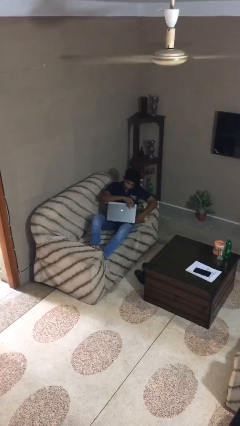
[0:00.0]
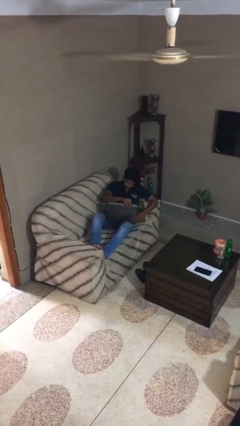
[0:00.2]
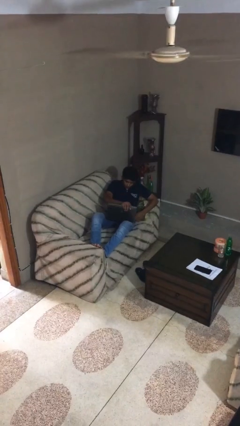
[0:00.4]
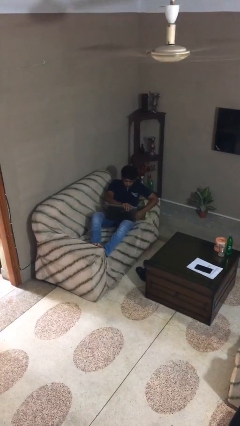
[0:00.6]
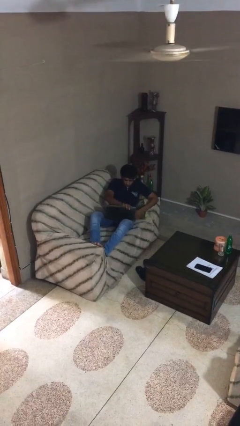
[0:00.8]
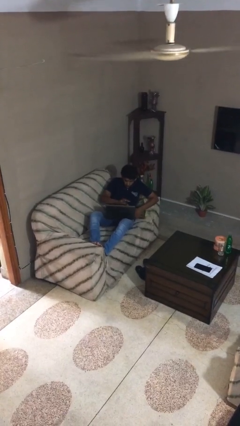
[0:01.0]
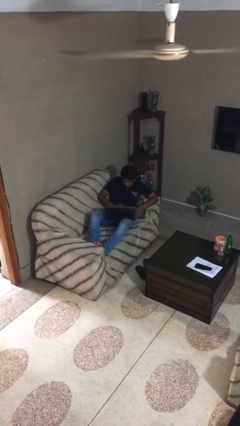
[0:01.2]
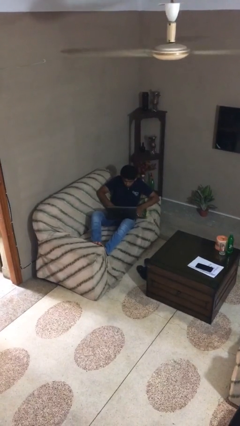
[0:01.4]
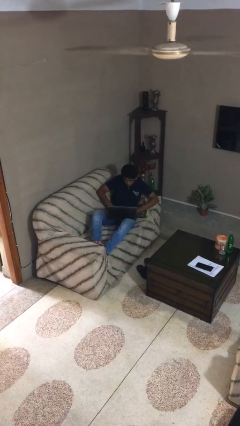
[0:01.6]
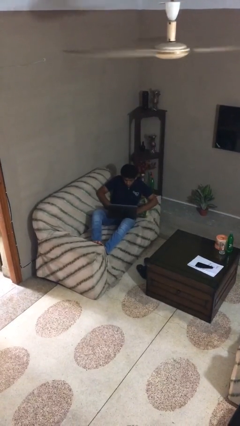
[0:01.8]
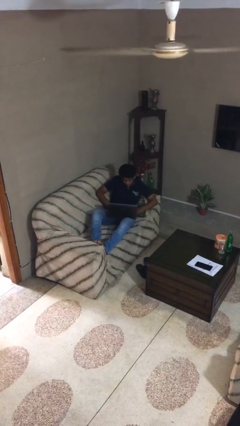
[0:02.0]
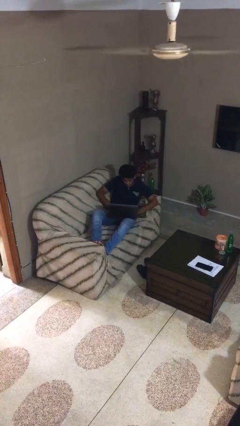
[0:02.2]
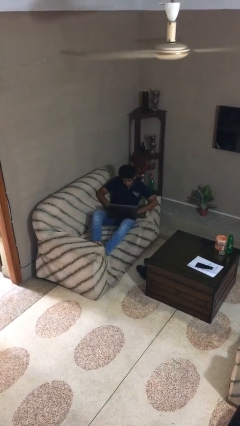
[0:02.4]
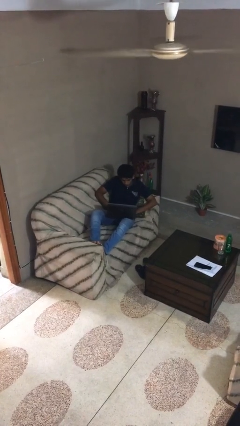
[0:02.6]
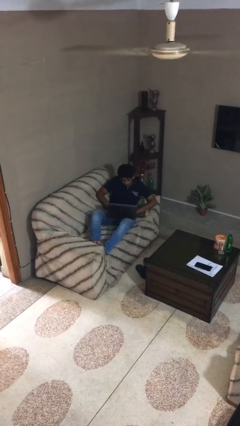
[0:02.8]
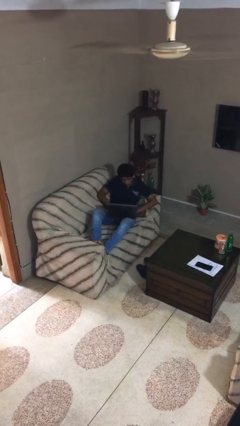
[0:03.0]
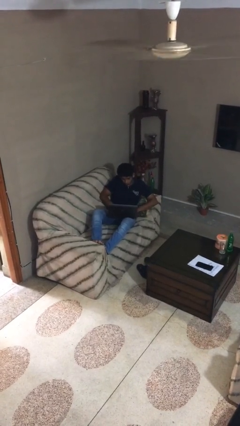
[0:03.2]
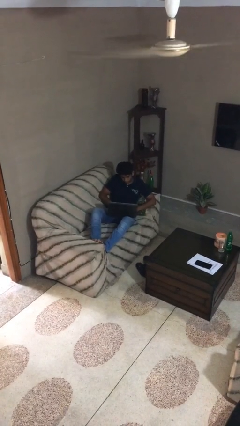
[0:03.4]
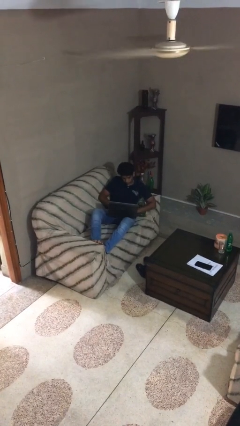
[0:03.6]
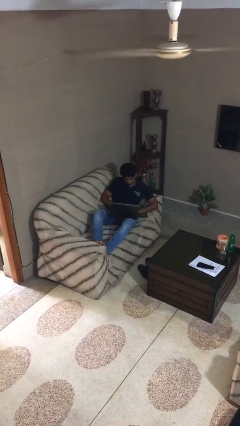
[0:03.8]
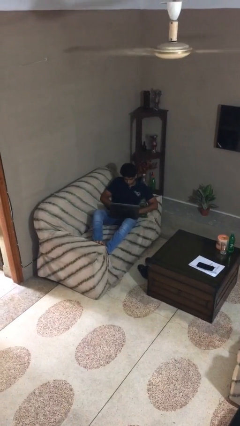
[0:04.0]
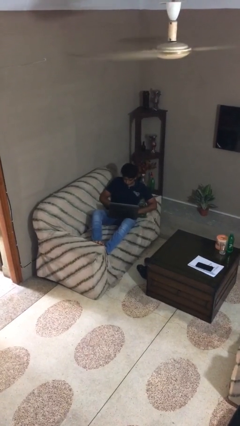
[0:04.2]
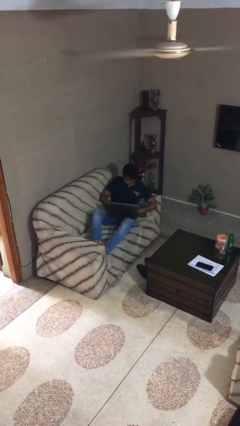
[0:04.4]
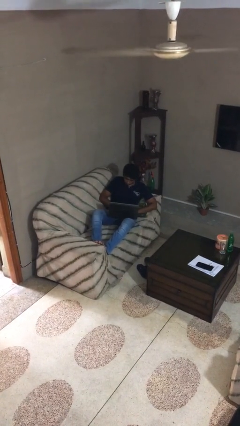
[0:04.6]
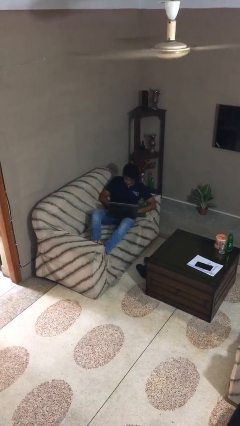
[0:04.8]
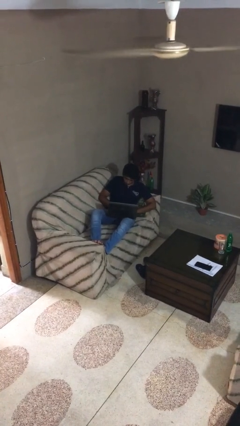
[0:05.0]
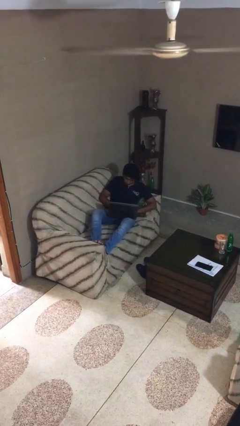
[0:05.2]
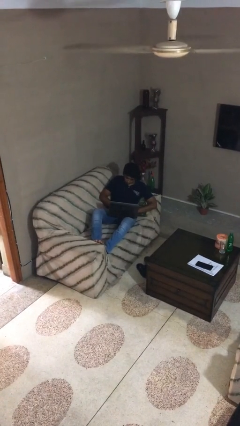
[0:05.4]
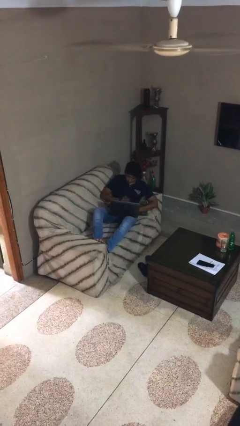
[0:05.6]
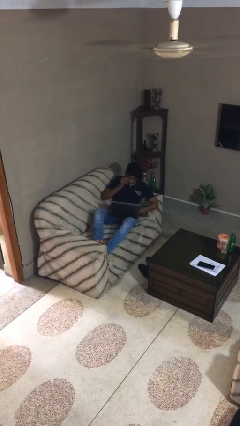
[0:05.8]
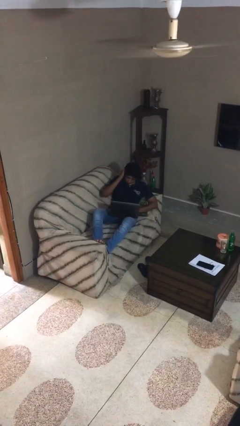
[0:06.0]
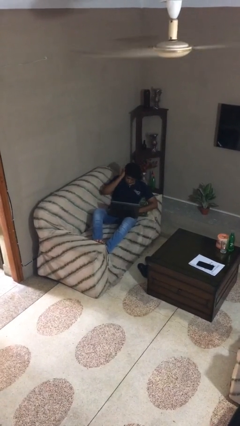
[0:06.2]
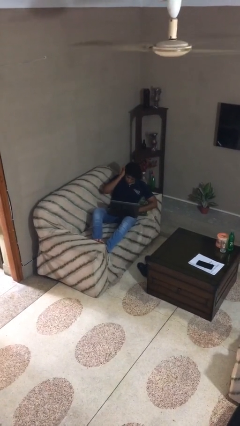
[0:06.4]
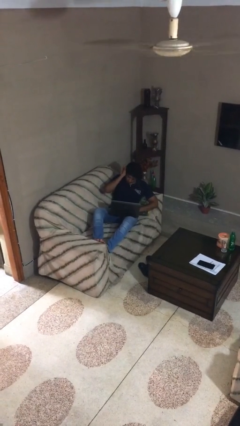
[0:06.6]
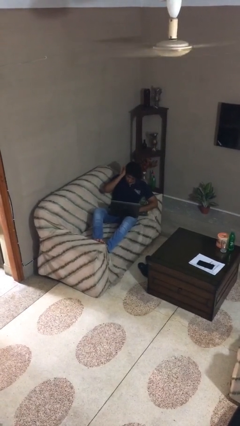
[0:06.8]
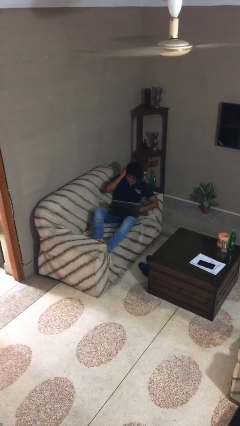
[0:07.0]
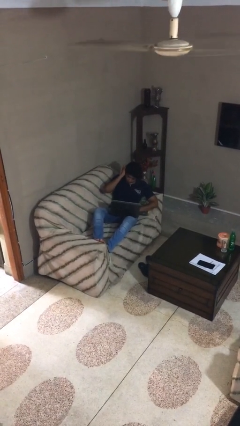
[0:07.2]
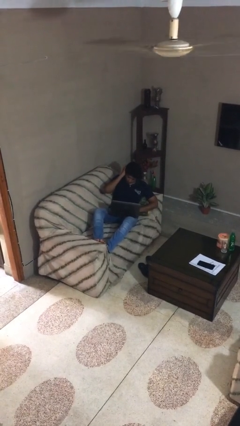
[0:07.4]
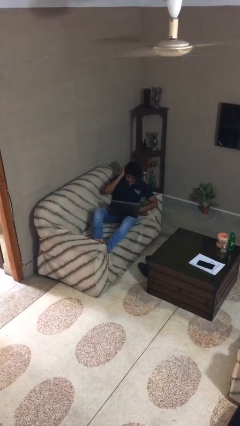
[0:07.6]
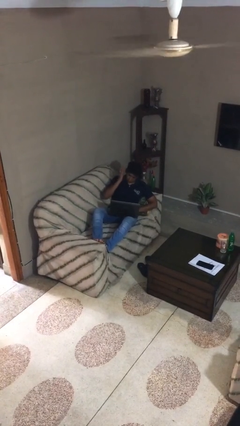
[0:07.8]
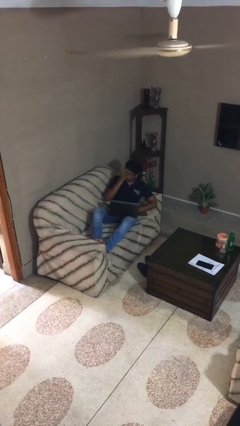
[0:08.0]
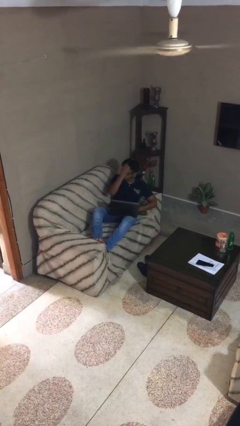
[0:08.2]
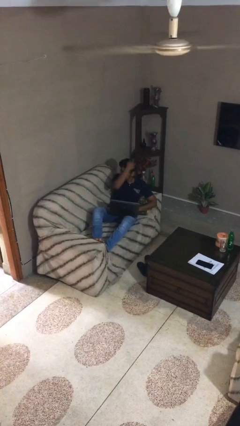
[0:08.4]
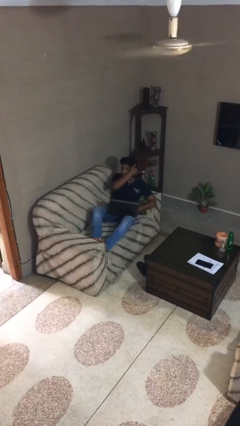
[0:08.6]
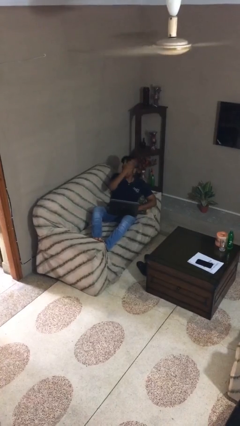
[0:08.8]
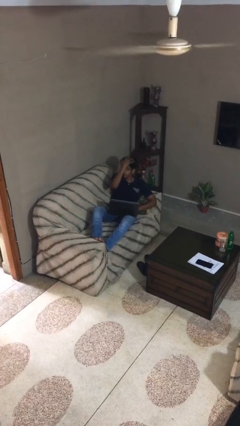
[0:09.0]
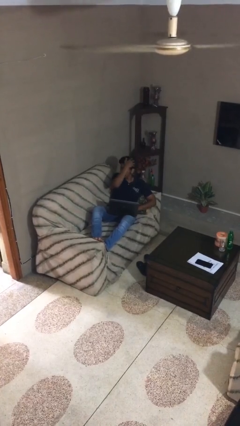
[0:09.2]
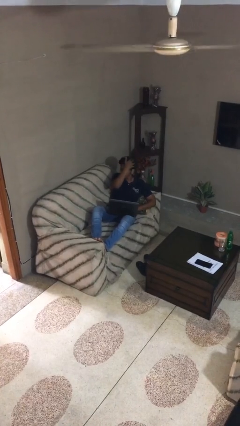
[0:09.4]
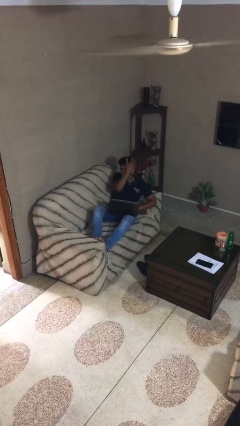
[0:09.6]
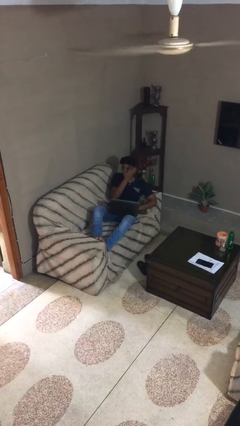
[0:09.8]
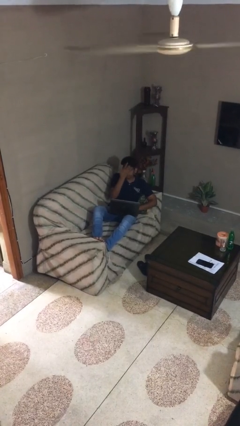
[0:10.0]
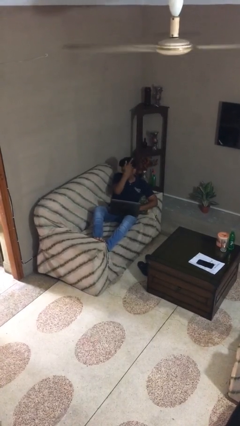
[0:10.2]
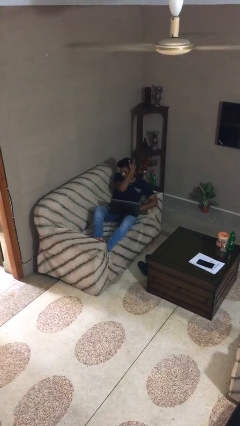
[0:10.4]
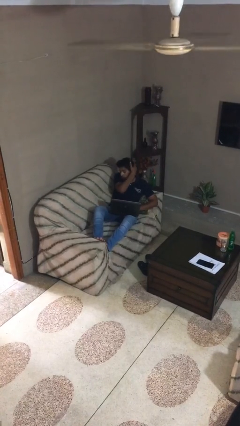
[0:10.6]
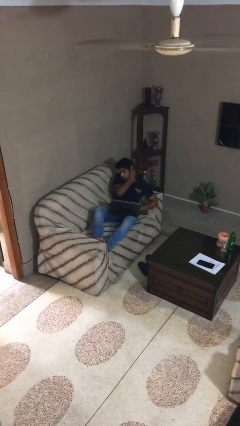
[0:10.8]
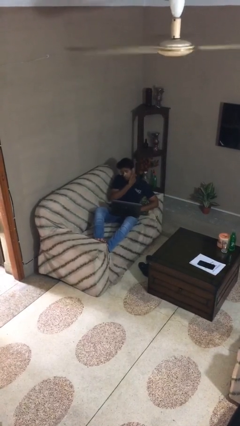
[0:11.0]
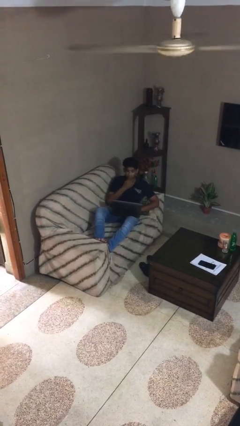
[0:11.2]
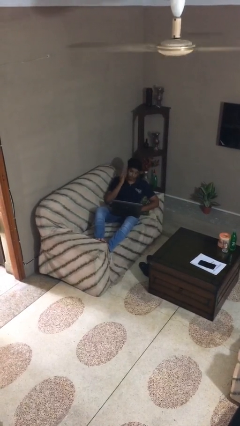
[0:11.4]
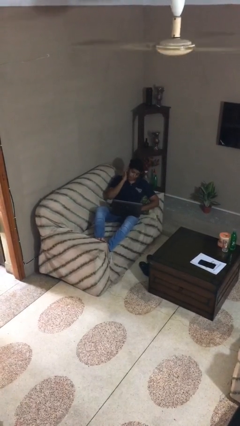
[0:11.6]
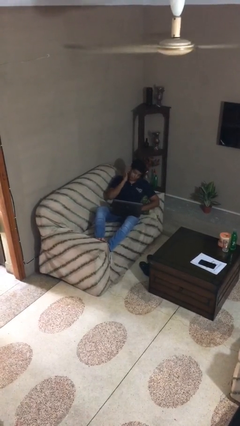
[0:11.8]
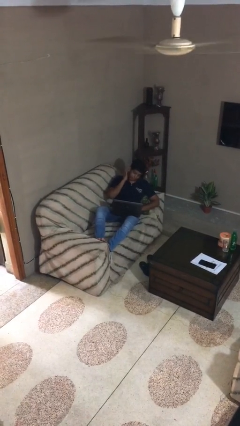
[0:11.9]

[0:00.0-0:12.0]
person interacts with laptop

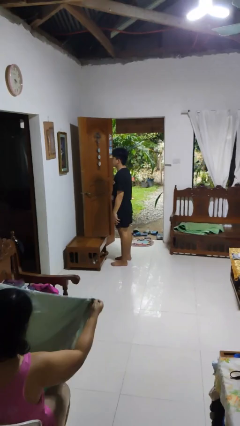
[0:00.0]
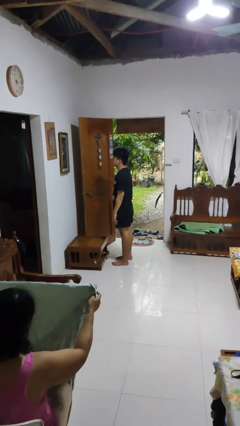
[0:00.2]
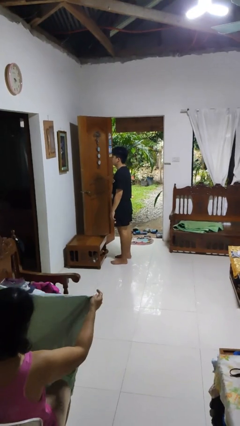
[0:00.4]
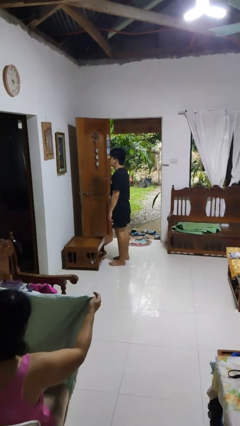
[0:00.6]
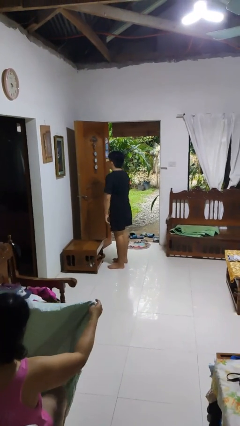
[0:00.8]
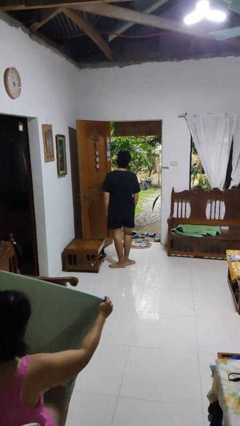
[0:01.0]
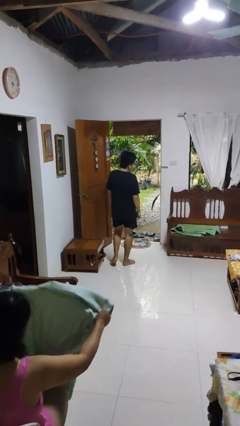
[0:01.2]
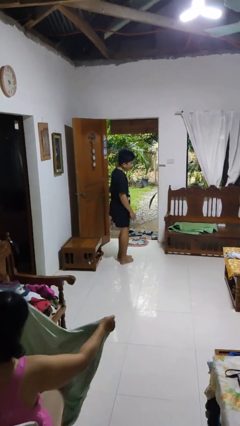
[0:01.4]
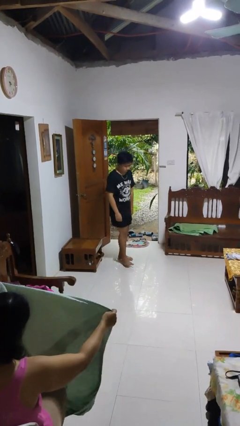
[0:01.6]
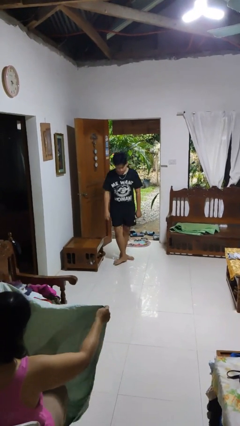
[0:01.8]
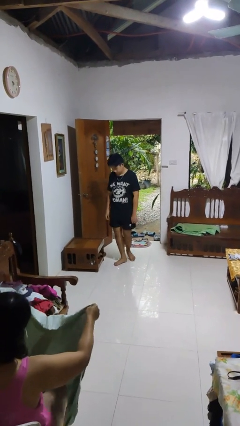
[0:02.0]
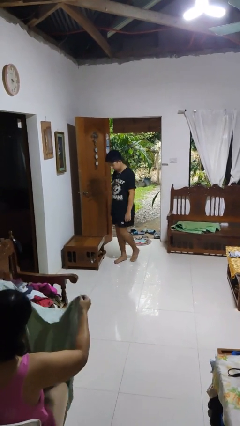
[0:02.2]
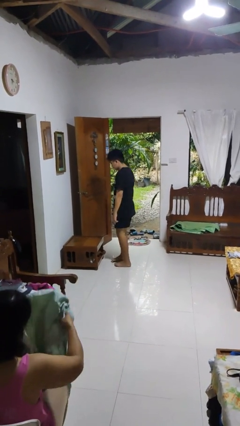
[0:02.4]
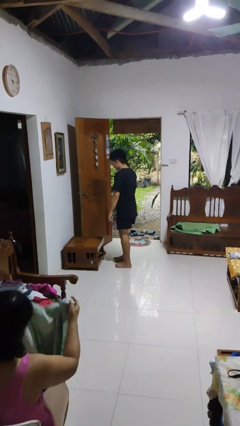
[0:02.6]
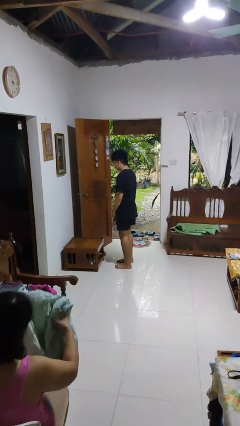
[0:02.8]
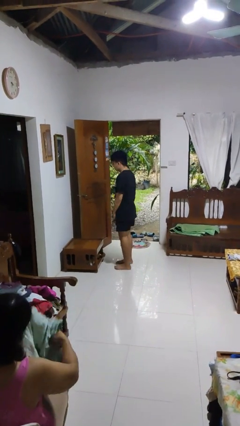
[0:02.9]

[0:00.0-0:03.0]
person twirls

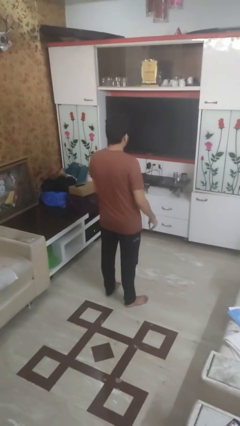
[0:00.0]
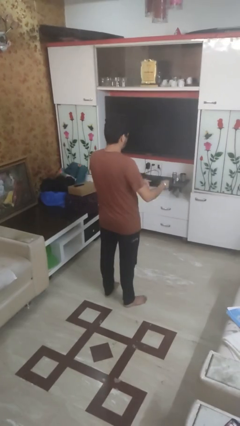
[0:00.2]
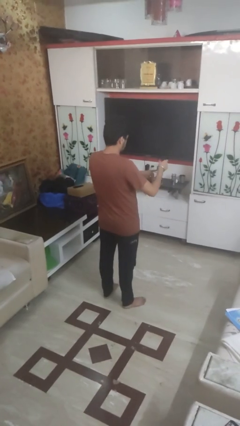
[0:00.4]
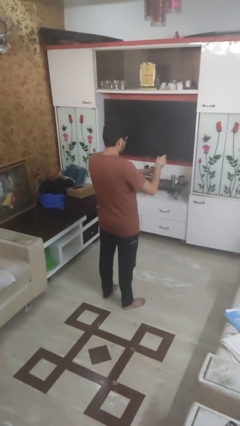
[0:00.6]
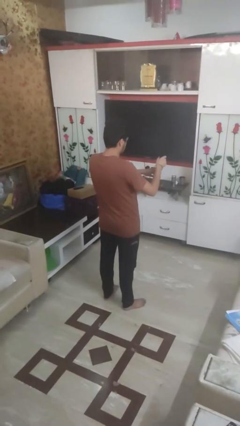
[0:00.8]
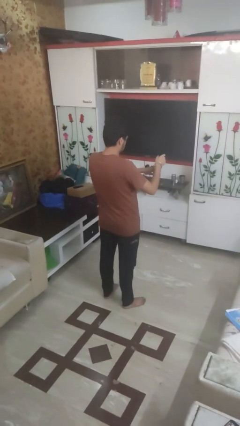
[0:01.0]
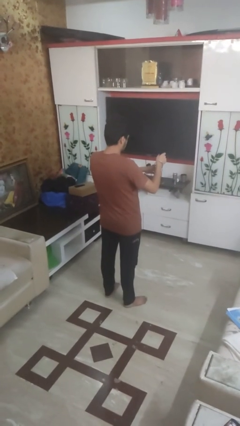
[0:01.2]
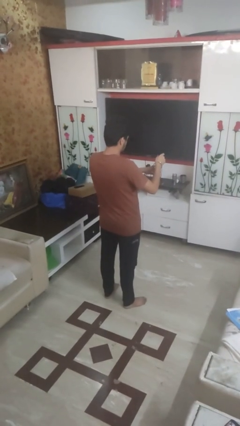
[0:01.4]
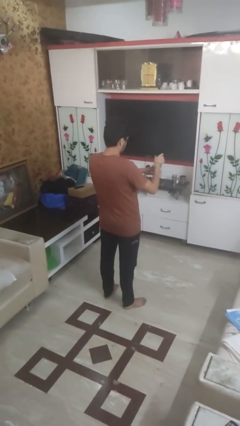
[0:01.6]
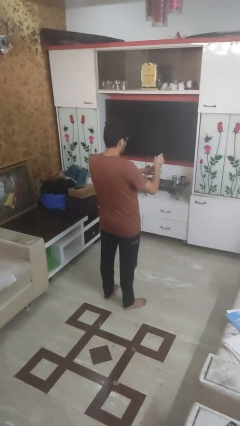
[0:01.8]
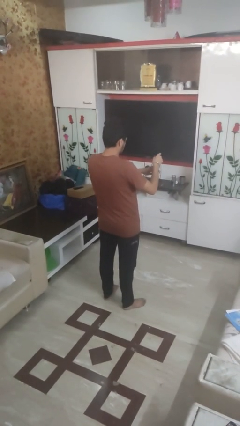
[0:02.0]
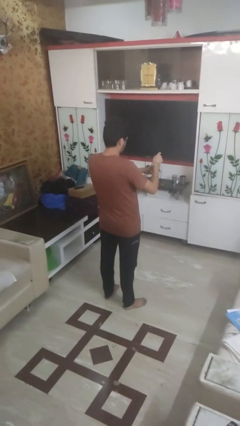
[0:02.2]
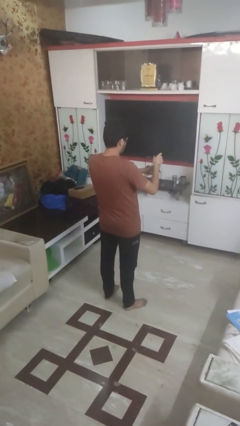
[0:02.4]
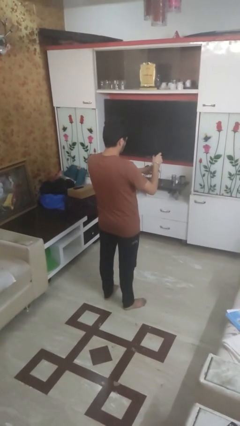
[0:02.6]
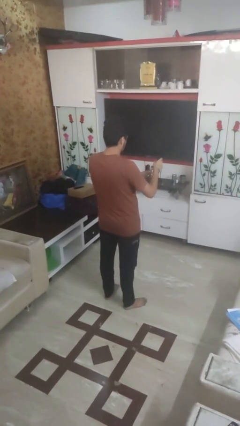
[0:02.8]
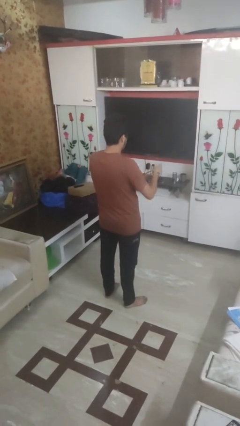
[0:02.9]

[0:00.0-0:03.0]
person clips fingernails
